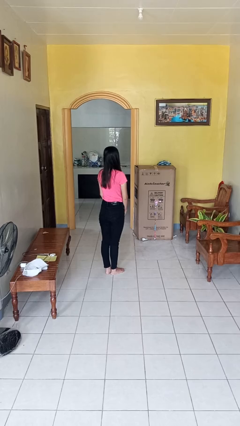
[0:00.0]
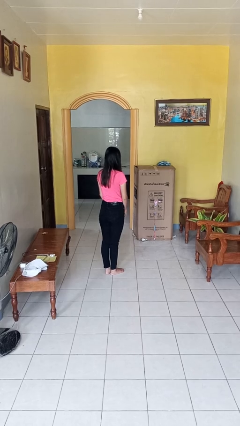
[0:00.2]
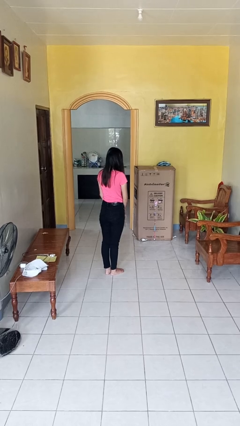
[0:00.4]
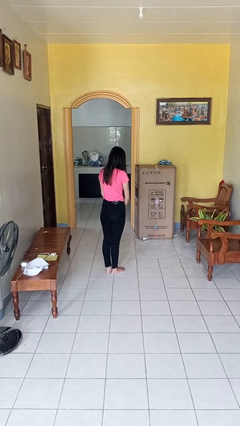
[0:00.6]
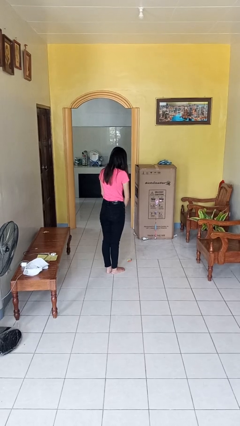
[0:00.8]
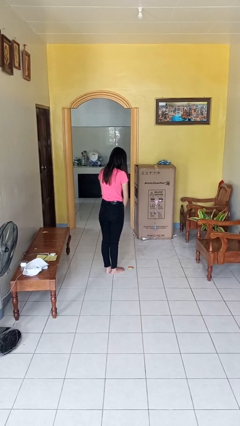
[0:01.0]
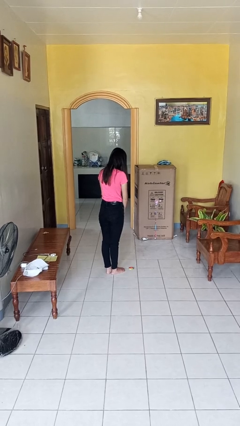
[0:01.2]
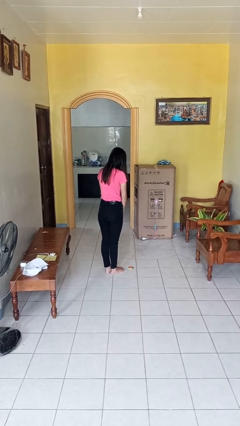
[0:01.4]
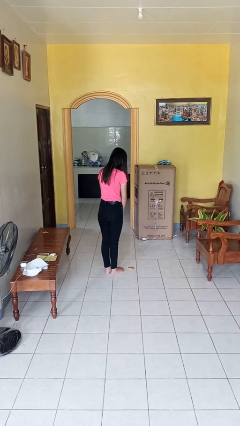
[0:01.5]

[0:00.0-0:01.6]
person throws object to ground

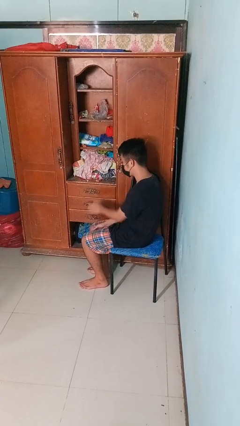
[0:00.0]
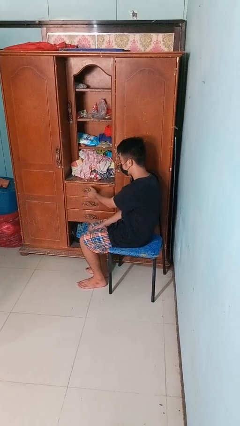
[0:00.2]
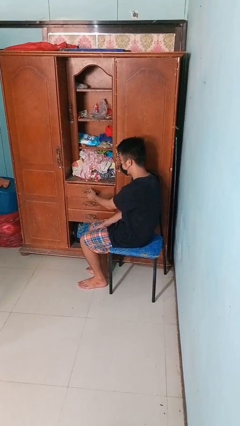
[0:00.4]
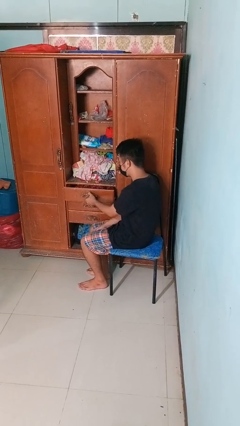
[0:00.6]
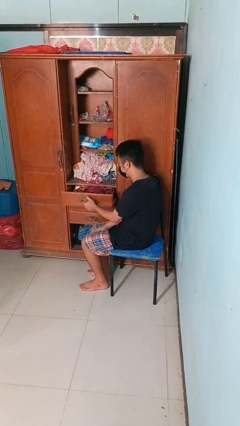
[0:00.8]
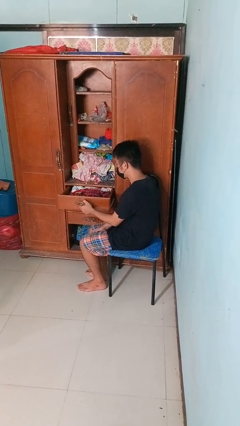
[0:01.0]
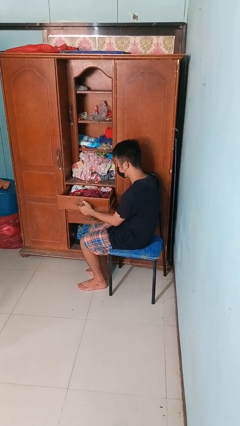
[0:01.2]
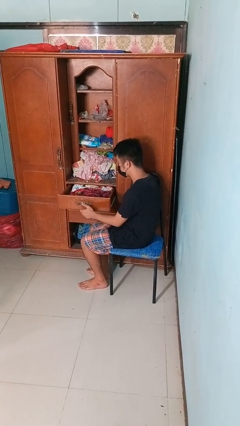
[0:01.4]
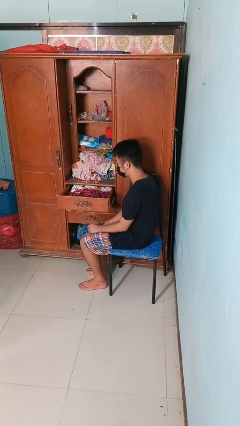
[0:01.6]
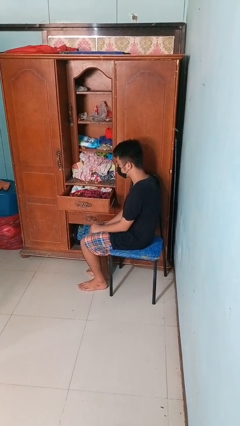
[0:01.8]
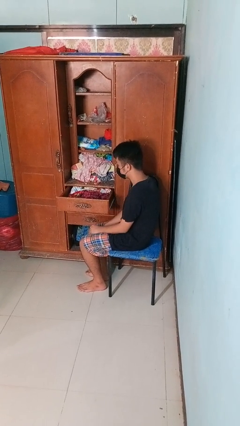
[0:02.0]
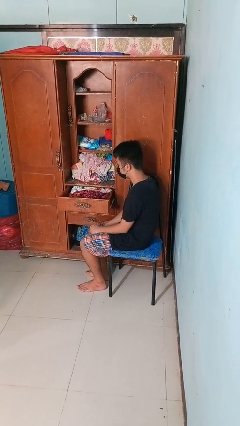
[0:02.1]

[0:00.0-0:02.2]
person opens dresser drawer

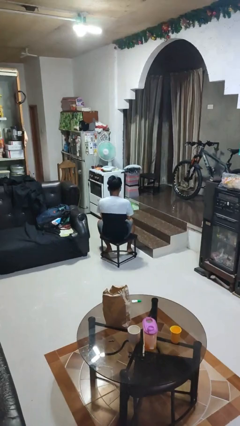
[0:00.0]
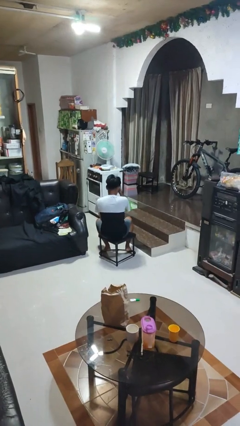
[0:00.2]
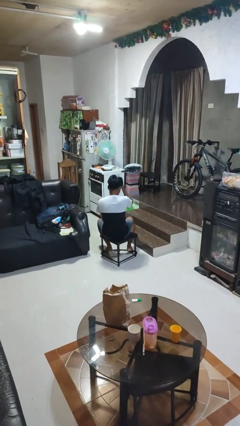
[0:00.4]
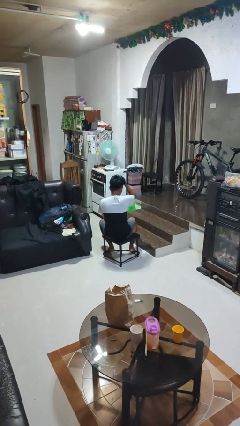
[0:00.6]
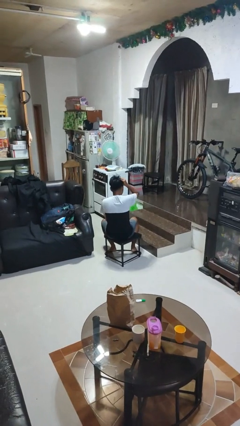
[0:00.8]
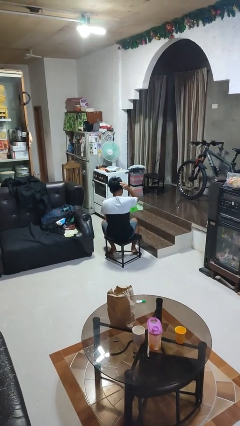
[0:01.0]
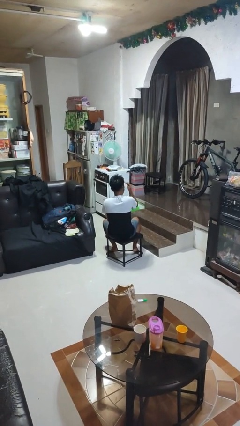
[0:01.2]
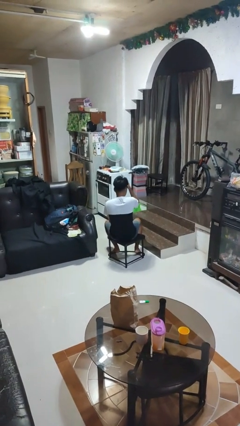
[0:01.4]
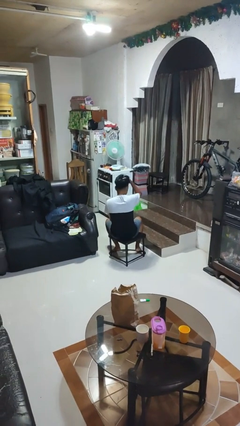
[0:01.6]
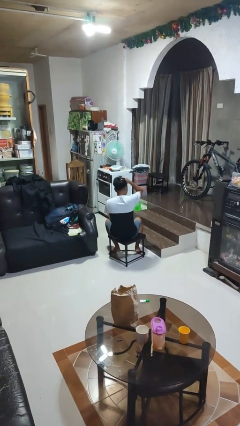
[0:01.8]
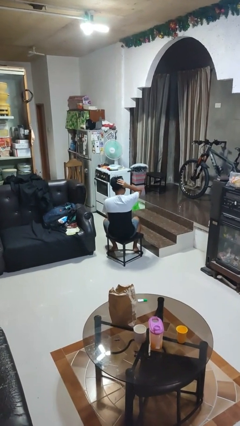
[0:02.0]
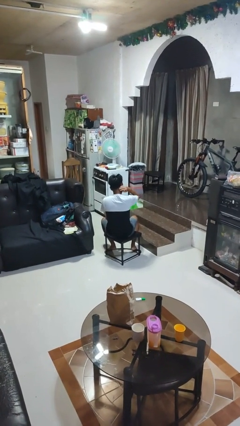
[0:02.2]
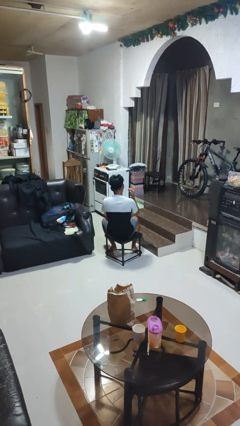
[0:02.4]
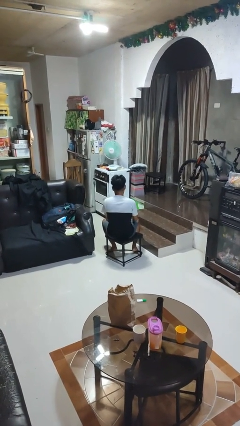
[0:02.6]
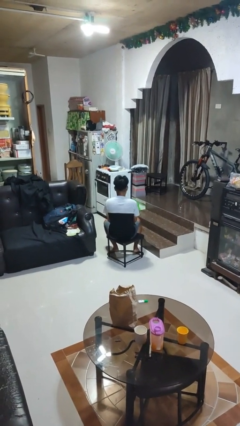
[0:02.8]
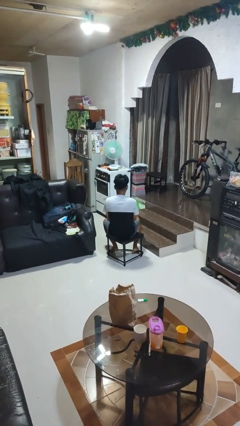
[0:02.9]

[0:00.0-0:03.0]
person strokes hair

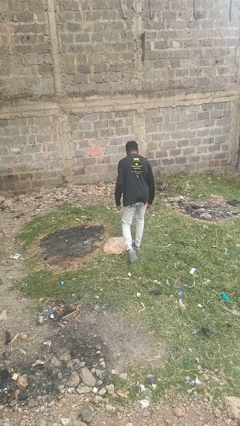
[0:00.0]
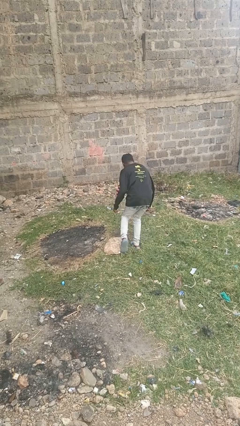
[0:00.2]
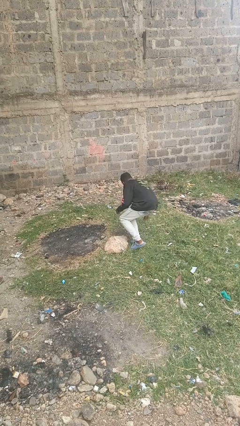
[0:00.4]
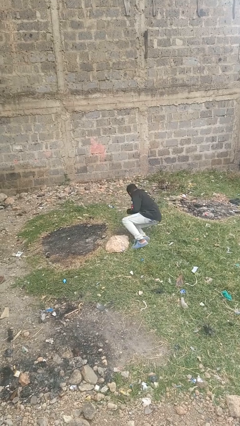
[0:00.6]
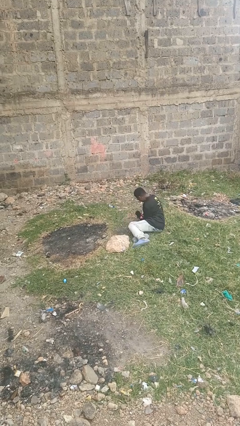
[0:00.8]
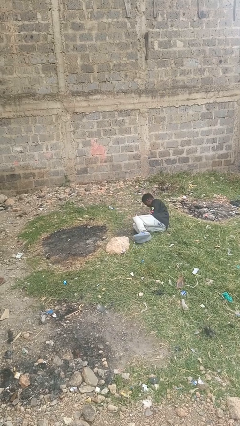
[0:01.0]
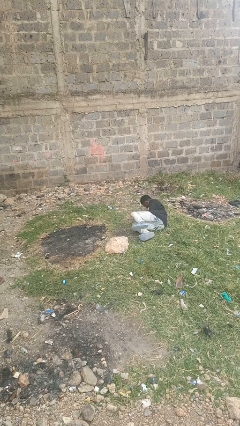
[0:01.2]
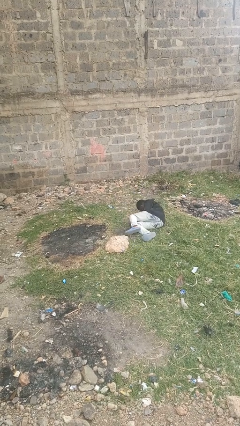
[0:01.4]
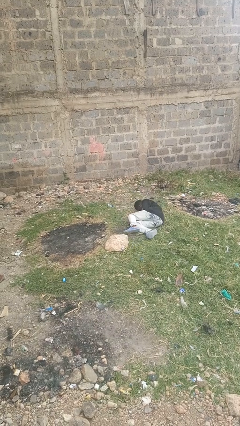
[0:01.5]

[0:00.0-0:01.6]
person trips on object on floor

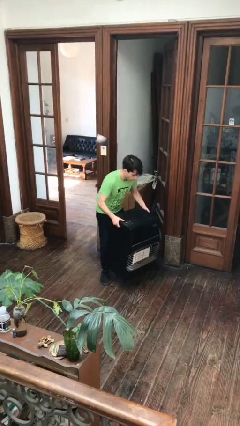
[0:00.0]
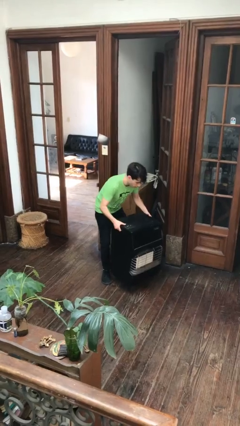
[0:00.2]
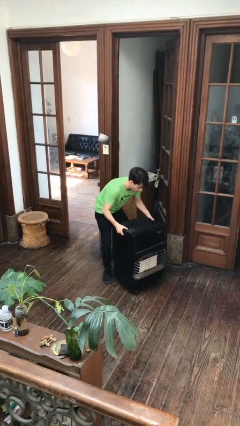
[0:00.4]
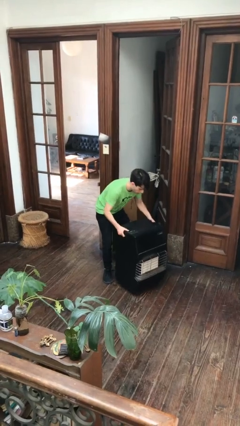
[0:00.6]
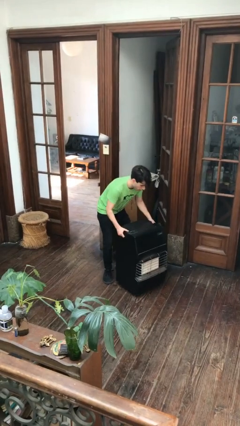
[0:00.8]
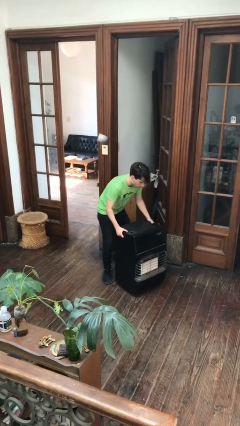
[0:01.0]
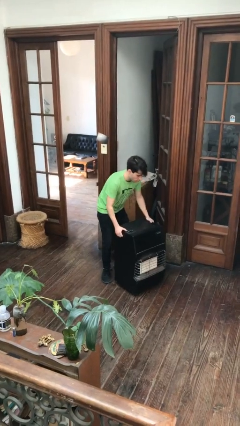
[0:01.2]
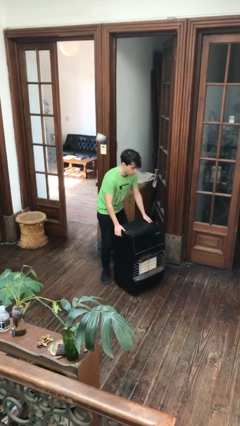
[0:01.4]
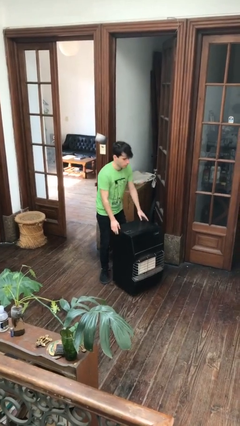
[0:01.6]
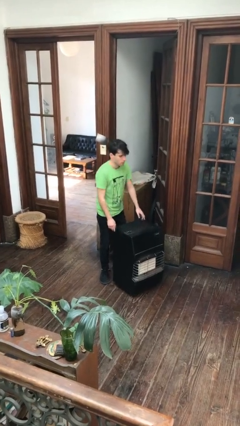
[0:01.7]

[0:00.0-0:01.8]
person puts down object on floor

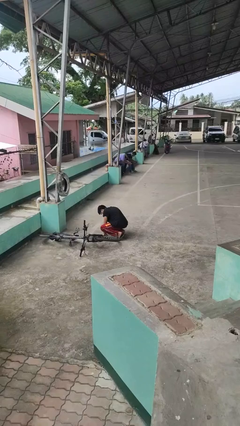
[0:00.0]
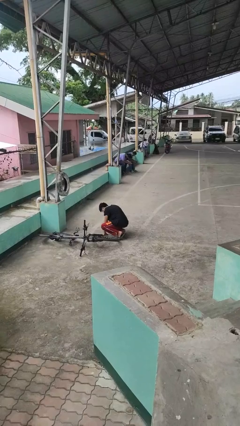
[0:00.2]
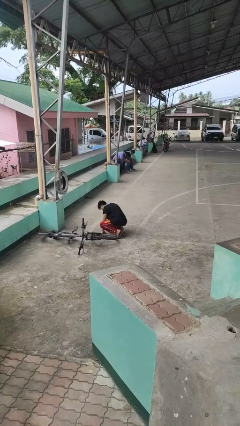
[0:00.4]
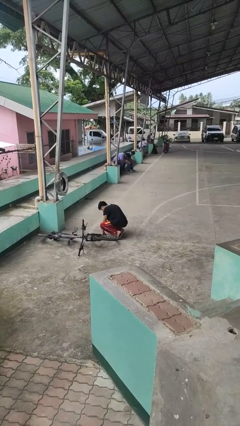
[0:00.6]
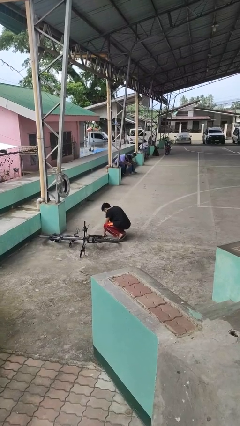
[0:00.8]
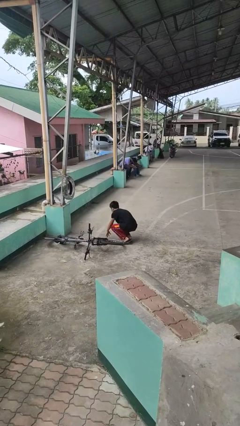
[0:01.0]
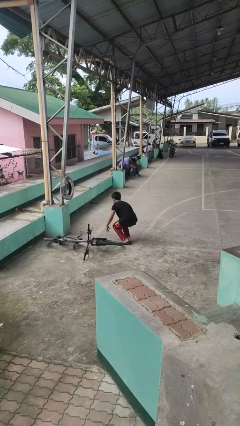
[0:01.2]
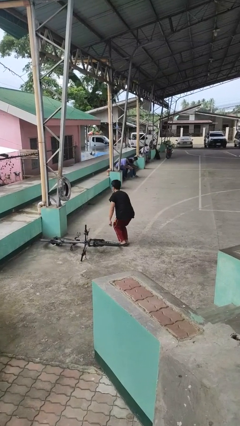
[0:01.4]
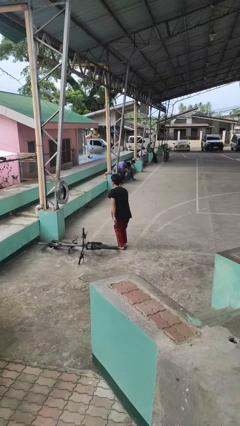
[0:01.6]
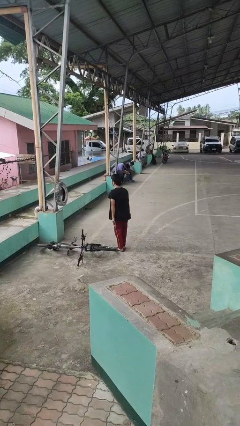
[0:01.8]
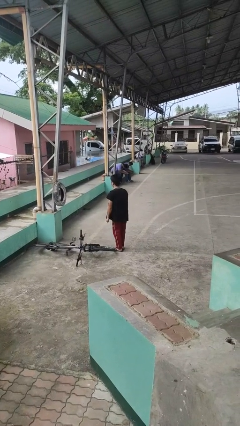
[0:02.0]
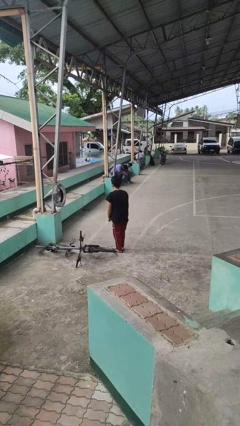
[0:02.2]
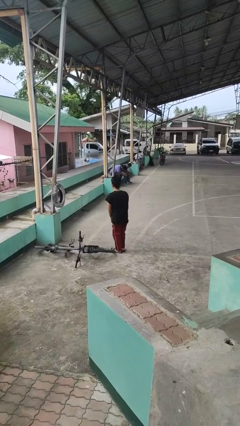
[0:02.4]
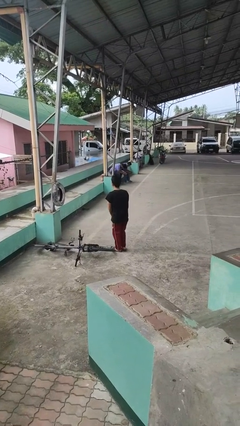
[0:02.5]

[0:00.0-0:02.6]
person stands up from floor

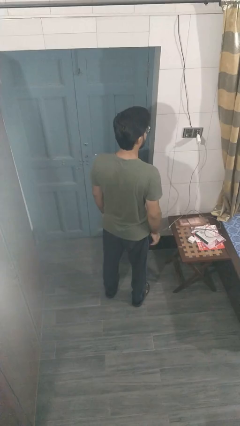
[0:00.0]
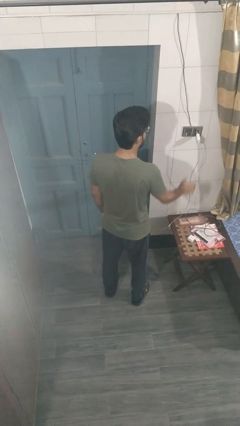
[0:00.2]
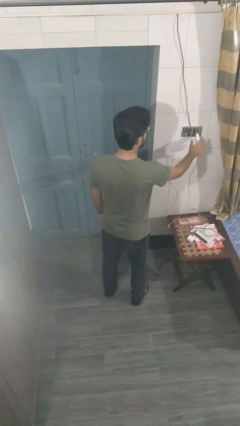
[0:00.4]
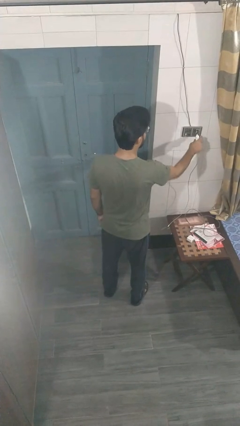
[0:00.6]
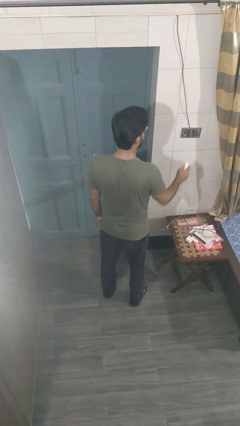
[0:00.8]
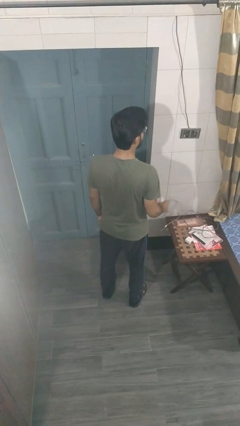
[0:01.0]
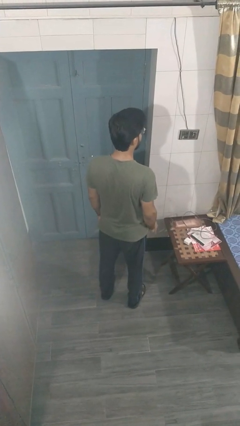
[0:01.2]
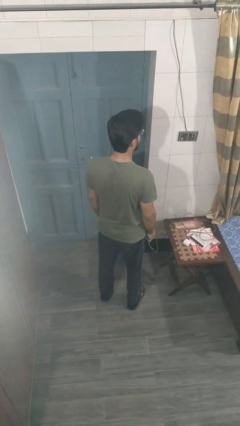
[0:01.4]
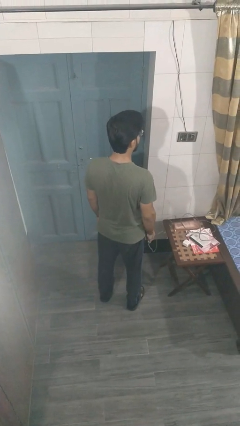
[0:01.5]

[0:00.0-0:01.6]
person unplugs from electrical socket

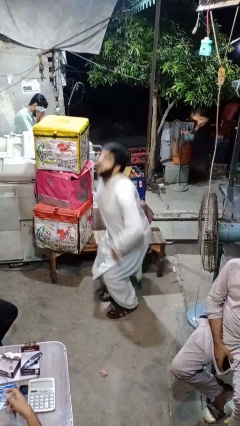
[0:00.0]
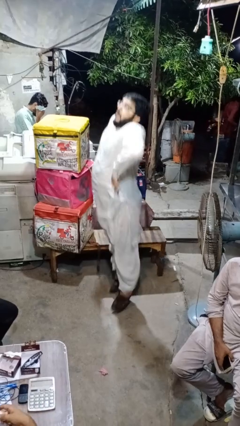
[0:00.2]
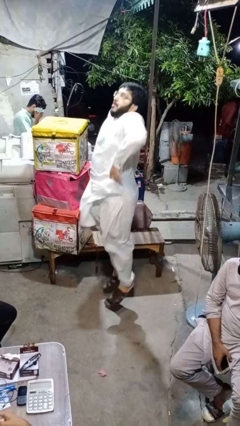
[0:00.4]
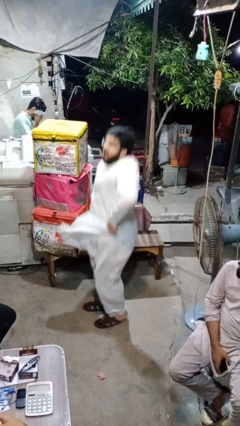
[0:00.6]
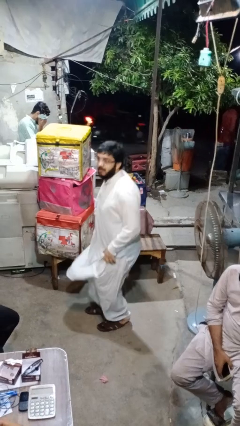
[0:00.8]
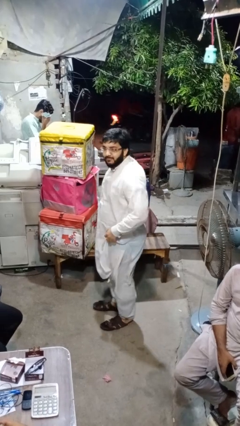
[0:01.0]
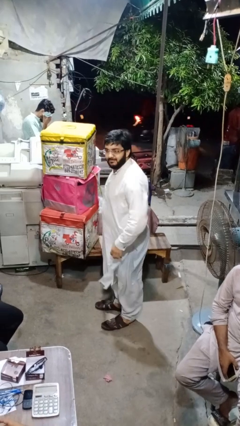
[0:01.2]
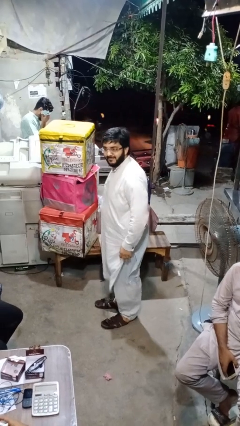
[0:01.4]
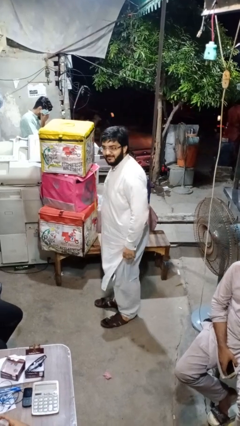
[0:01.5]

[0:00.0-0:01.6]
person jumps

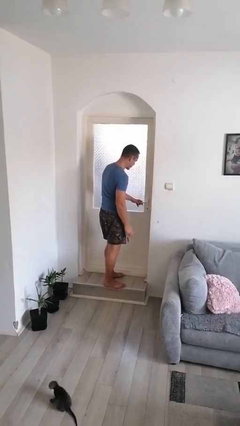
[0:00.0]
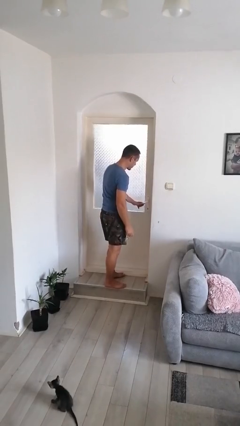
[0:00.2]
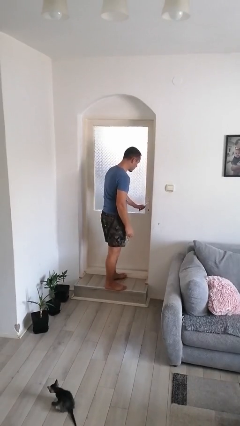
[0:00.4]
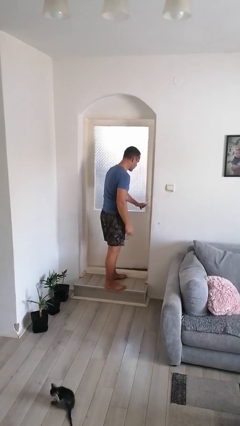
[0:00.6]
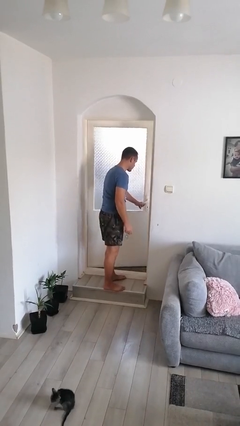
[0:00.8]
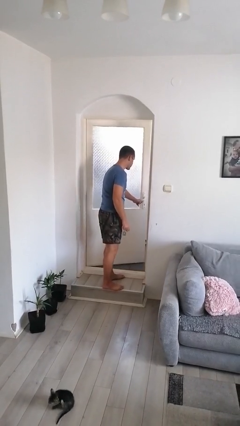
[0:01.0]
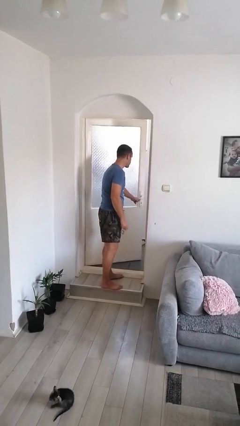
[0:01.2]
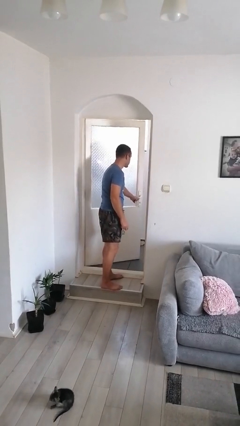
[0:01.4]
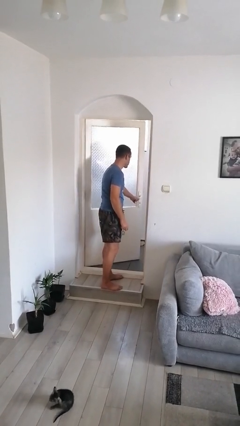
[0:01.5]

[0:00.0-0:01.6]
person opens facility door
